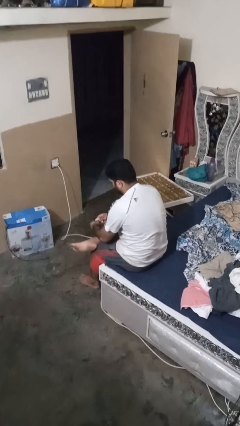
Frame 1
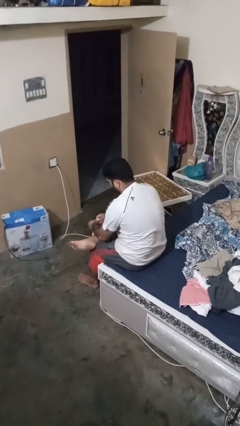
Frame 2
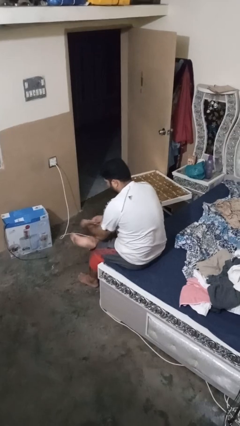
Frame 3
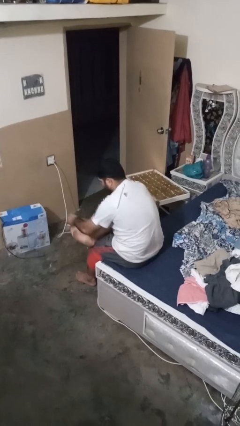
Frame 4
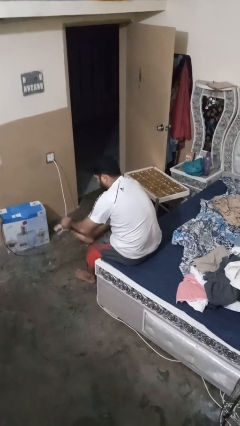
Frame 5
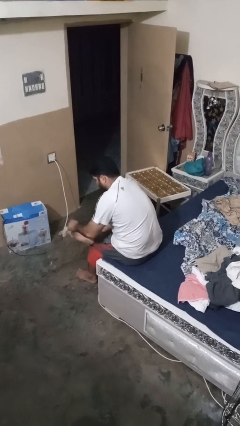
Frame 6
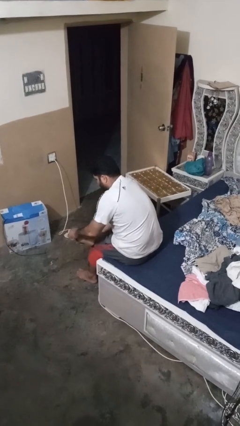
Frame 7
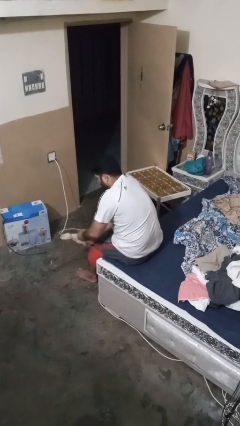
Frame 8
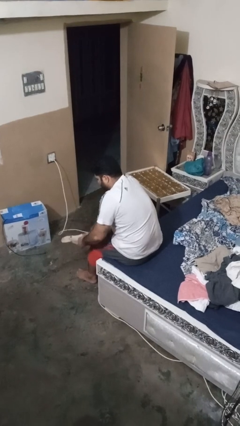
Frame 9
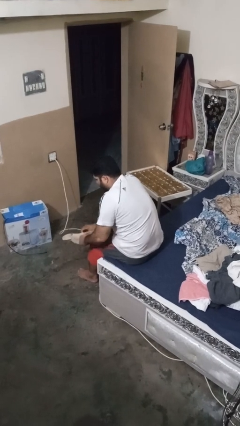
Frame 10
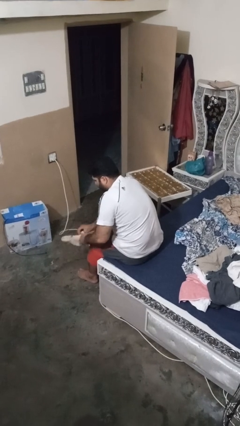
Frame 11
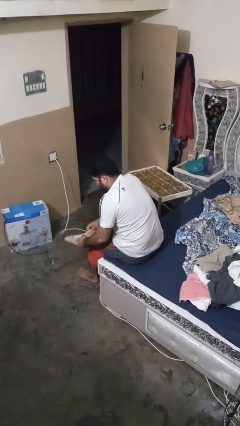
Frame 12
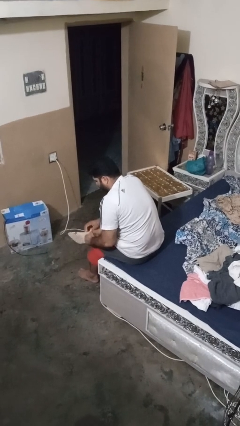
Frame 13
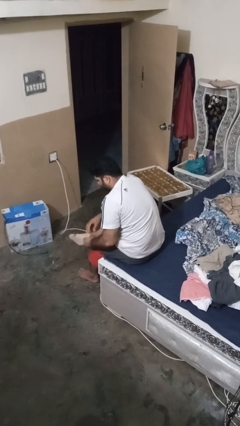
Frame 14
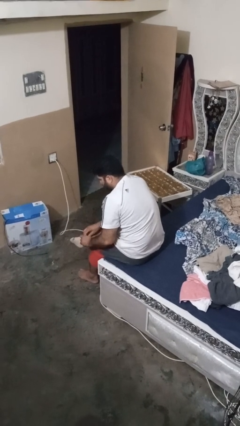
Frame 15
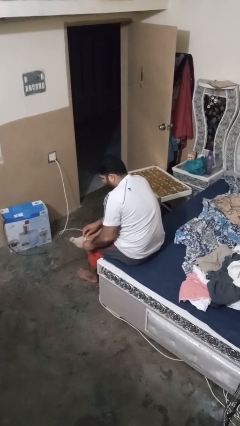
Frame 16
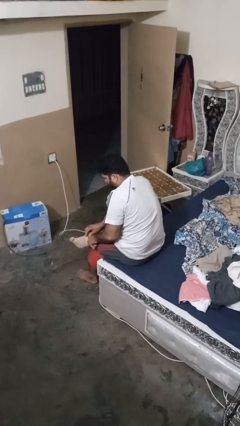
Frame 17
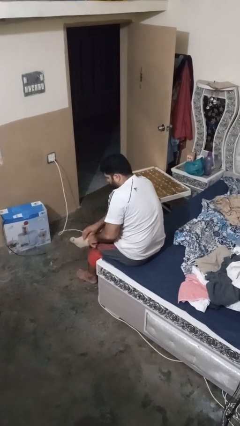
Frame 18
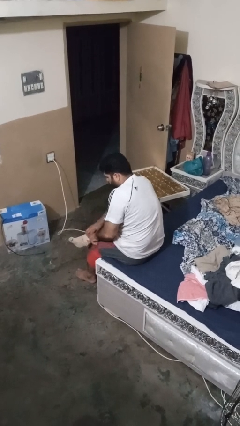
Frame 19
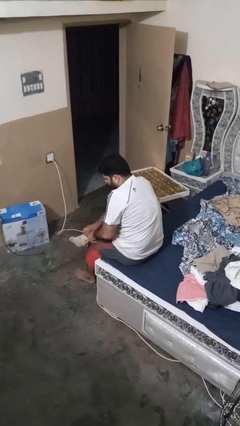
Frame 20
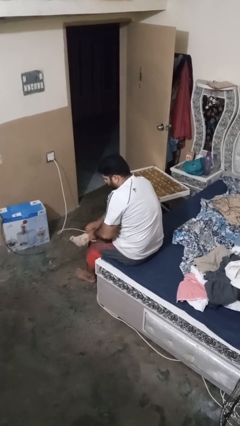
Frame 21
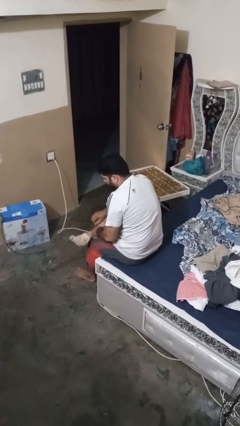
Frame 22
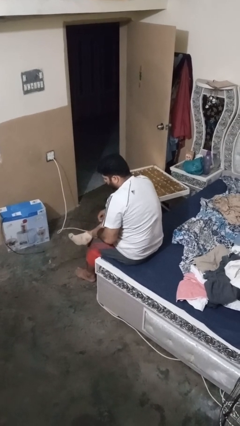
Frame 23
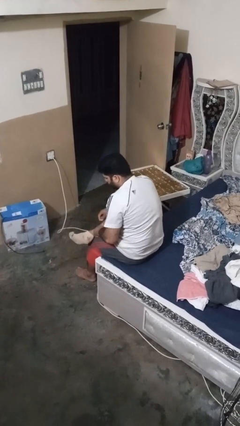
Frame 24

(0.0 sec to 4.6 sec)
person puts on socks

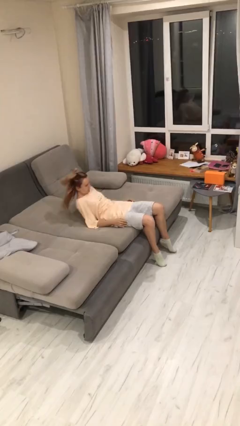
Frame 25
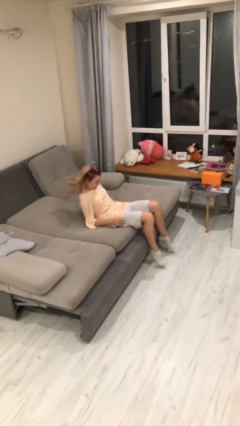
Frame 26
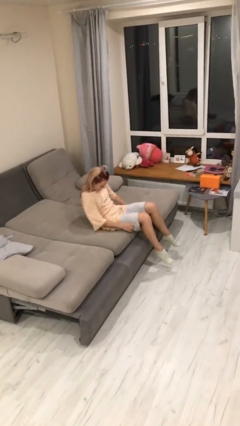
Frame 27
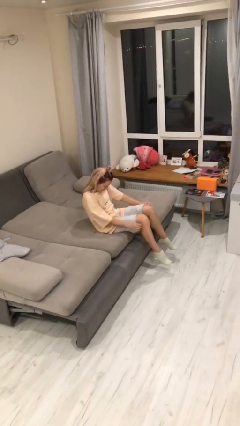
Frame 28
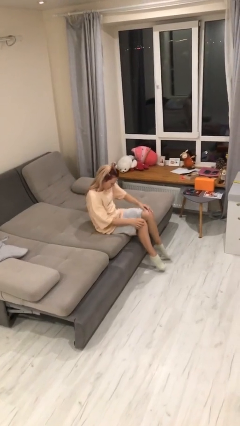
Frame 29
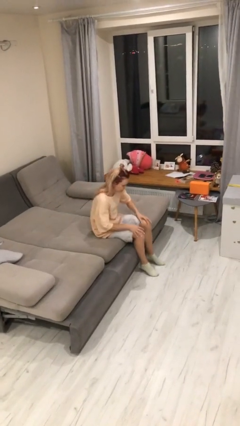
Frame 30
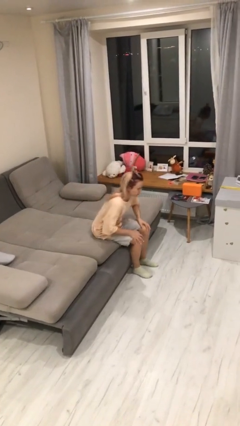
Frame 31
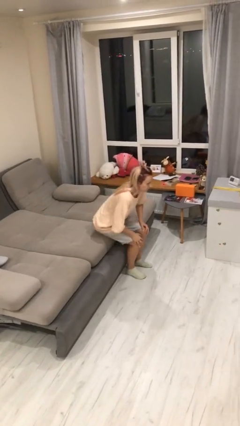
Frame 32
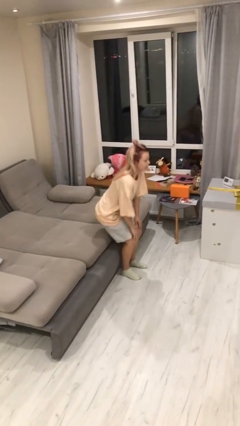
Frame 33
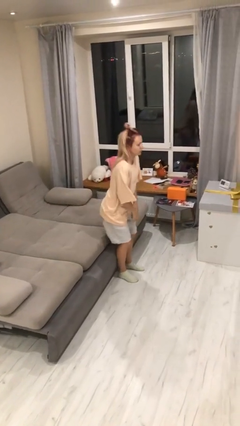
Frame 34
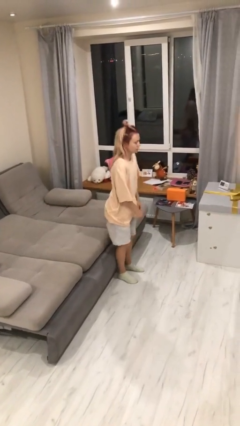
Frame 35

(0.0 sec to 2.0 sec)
person stands up

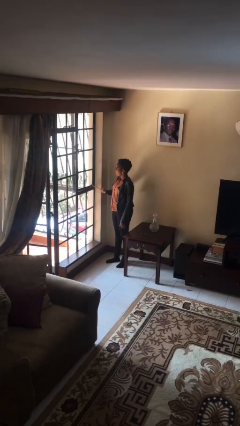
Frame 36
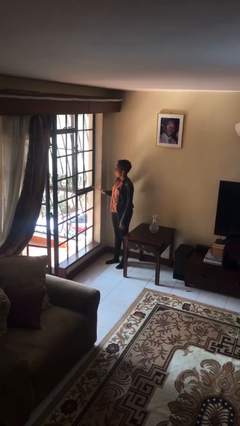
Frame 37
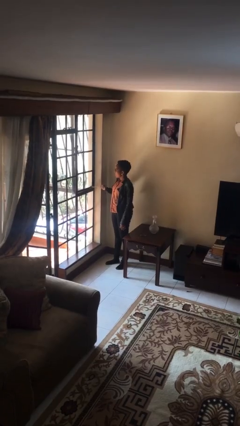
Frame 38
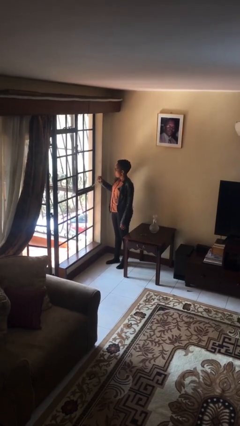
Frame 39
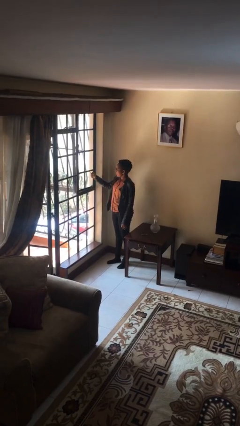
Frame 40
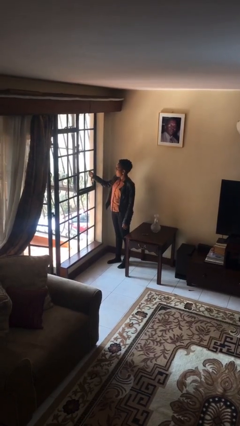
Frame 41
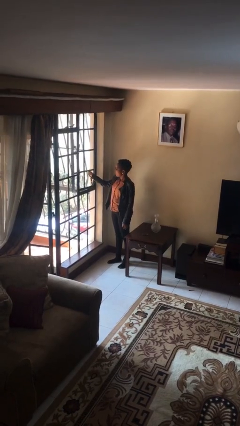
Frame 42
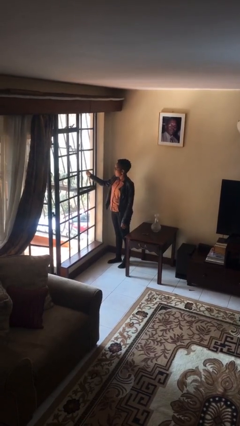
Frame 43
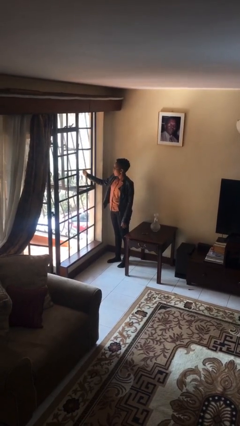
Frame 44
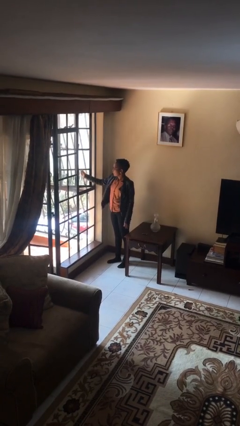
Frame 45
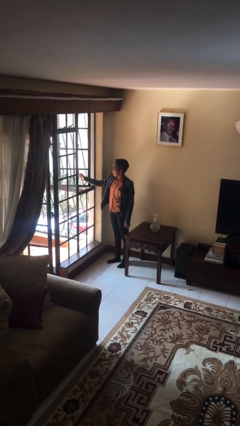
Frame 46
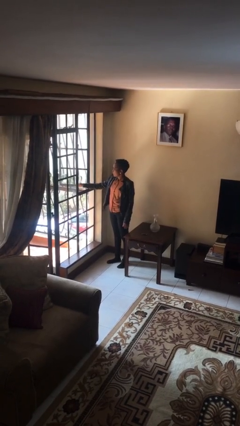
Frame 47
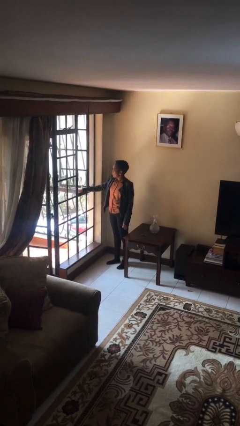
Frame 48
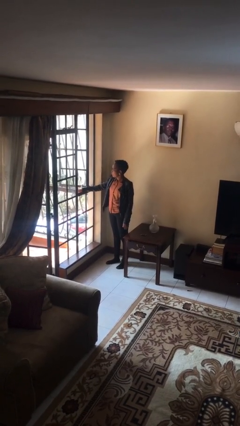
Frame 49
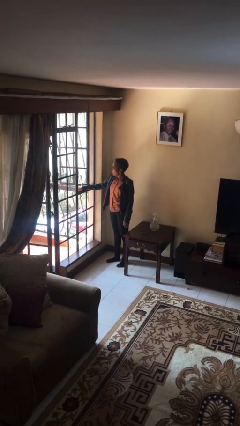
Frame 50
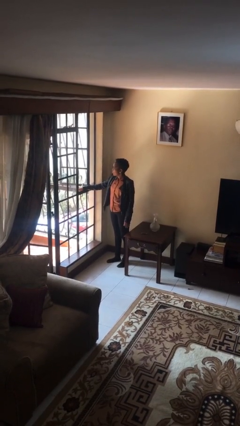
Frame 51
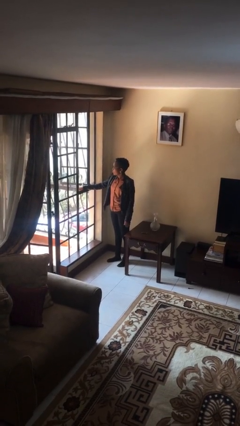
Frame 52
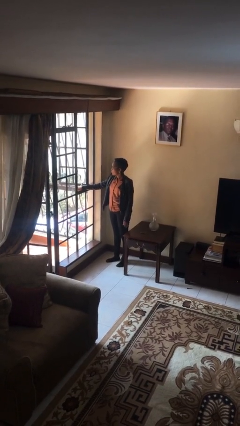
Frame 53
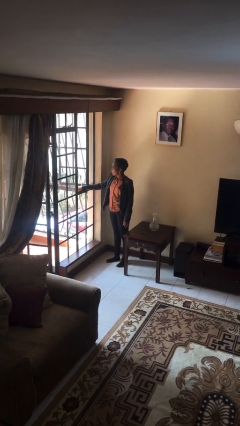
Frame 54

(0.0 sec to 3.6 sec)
person opens home window

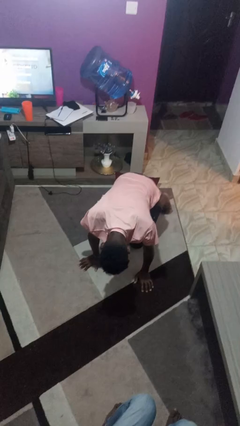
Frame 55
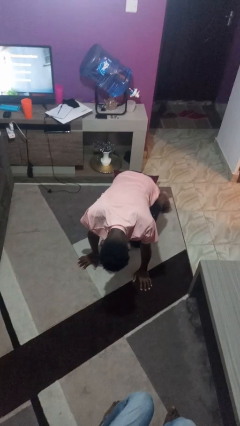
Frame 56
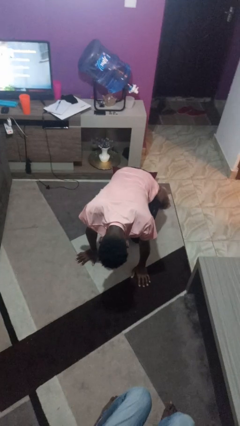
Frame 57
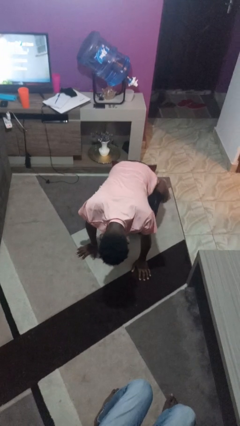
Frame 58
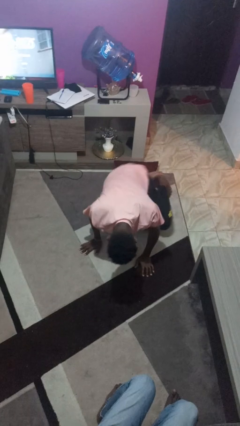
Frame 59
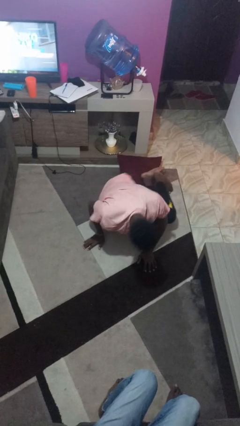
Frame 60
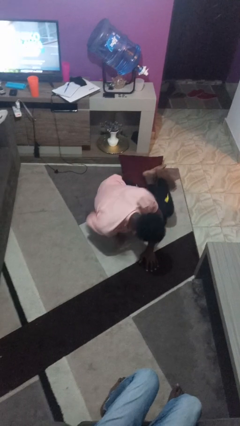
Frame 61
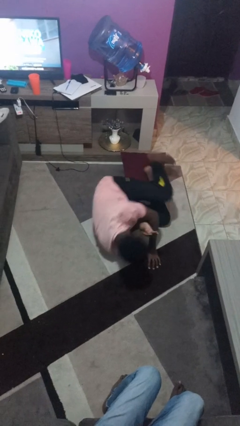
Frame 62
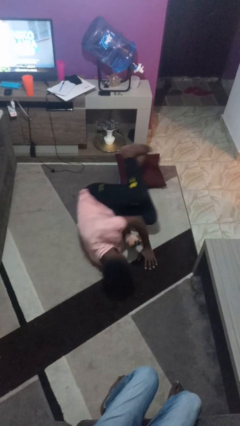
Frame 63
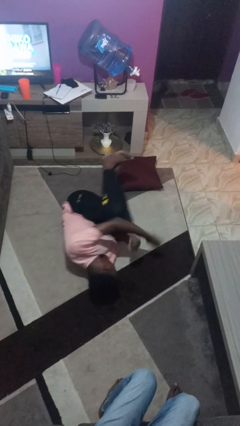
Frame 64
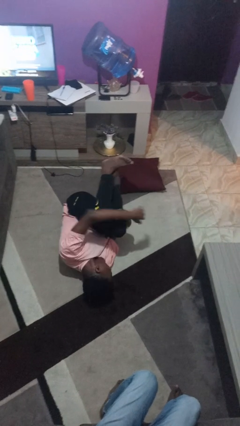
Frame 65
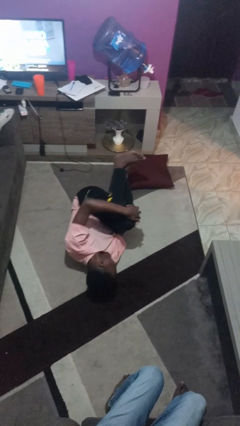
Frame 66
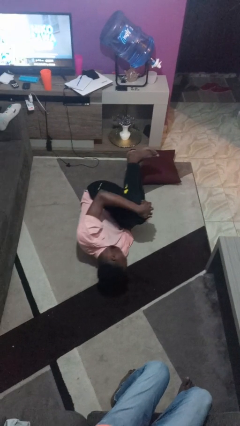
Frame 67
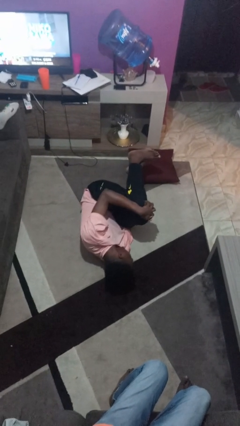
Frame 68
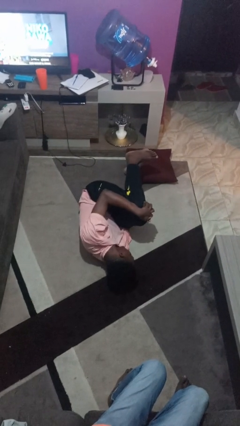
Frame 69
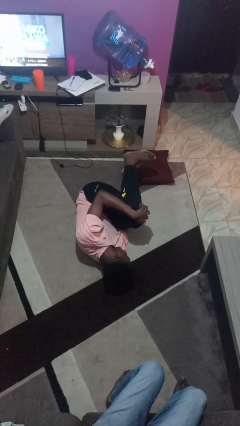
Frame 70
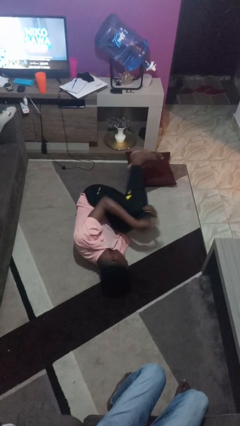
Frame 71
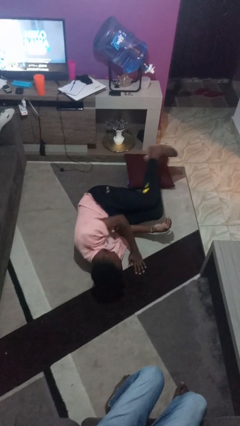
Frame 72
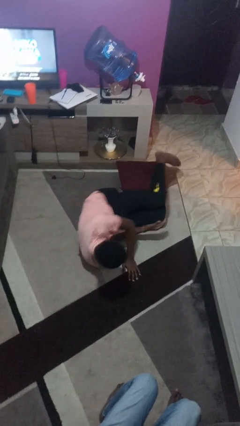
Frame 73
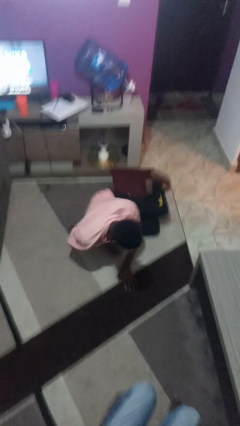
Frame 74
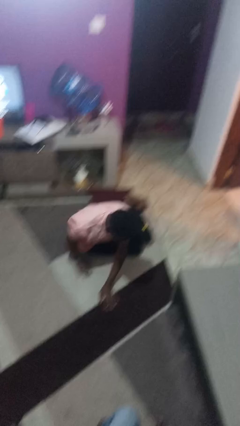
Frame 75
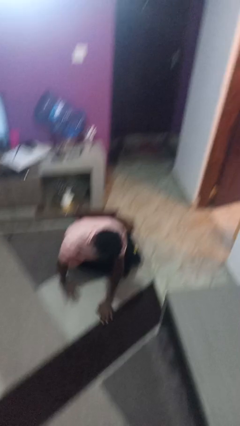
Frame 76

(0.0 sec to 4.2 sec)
person lies down on floor

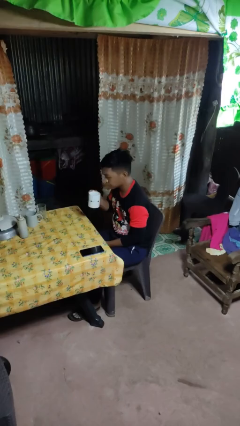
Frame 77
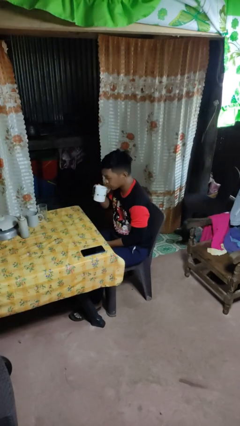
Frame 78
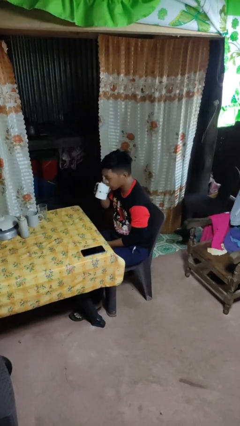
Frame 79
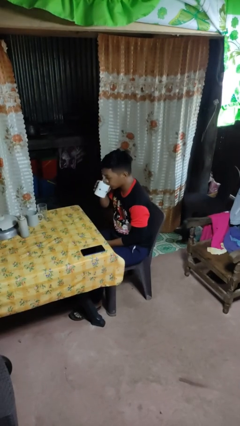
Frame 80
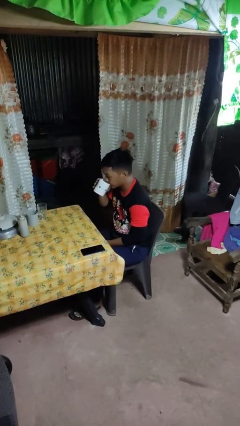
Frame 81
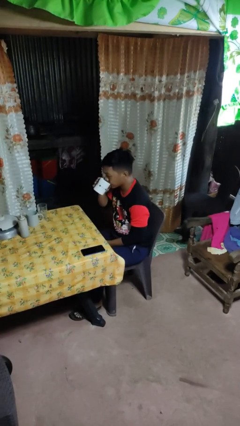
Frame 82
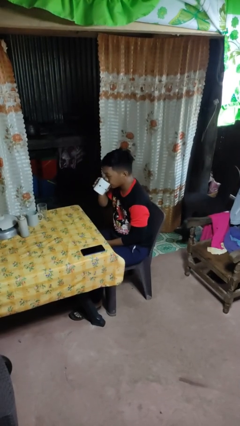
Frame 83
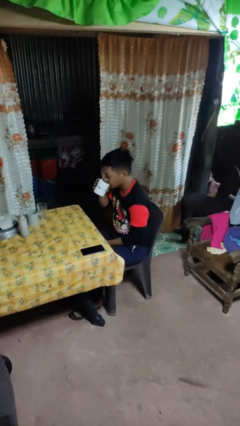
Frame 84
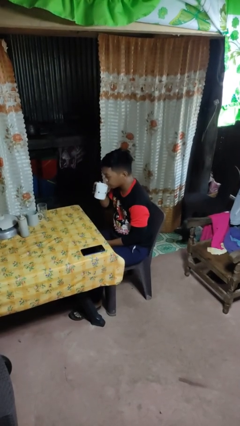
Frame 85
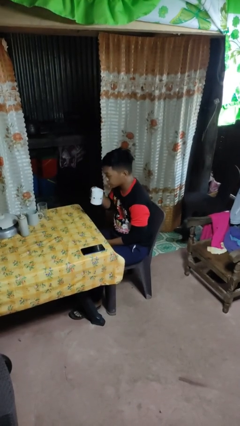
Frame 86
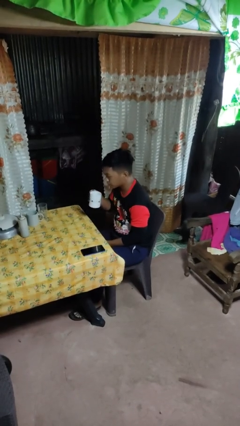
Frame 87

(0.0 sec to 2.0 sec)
person drinks from mug

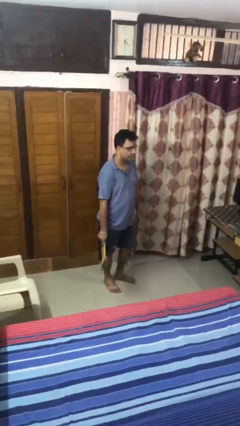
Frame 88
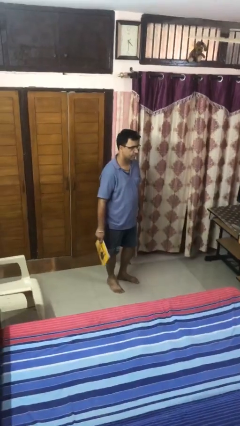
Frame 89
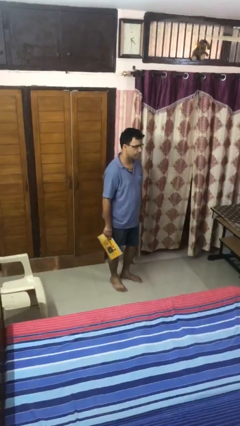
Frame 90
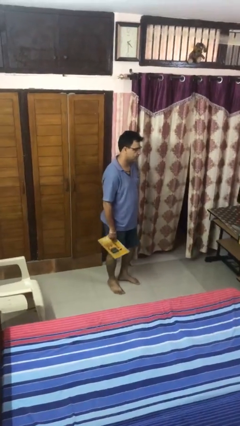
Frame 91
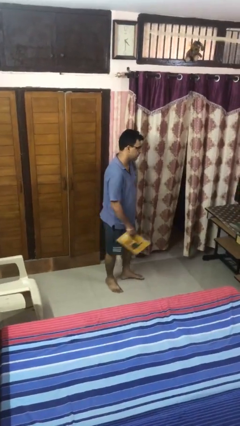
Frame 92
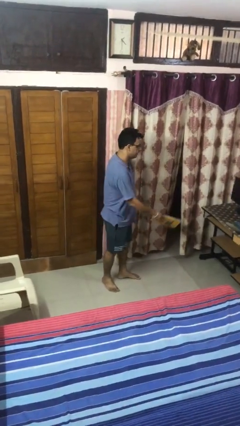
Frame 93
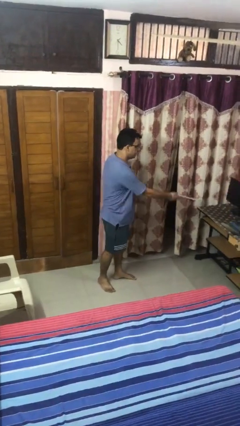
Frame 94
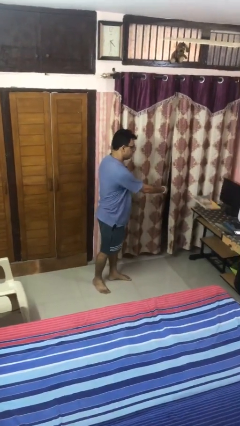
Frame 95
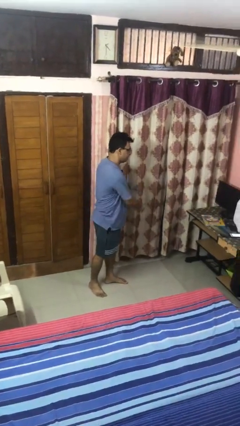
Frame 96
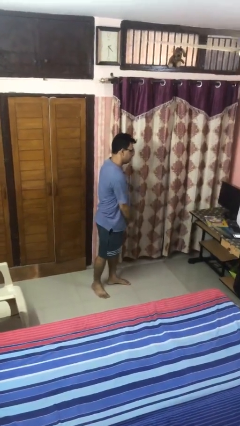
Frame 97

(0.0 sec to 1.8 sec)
person throws object on table
